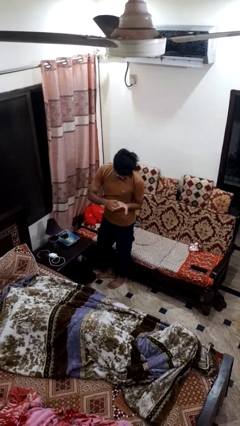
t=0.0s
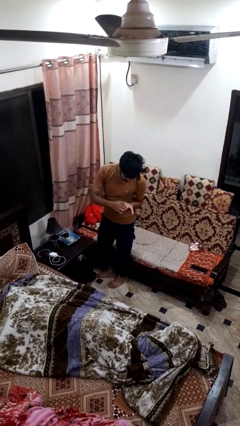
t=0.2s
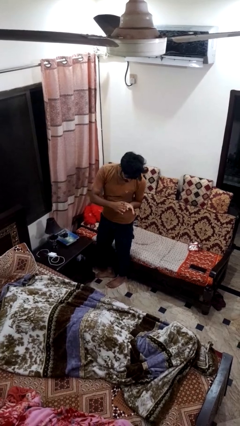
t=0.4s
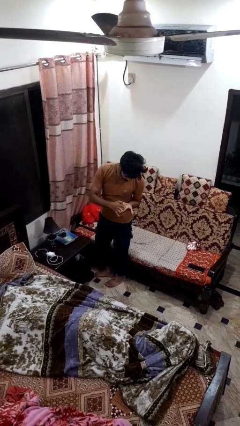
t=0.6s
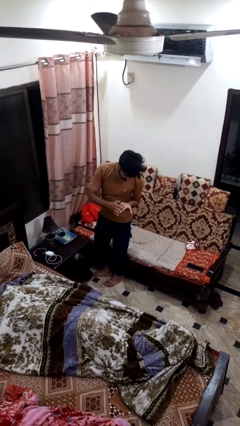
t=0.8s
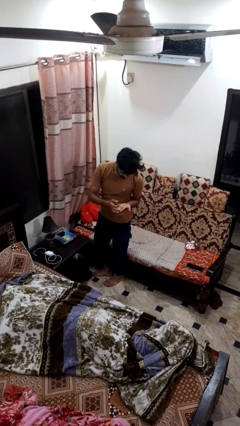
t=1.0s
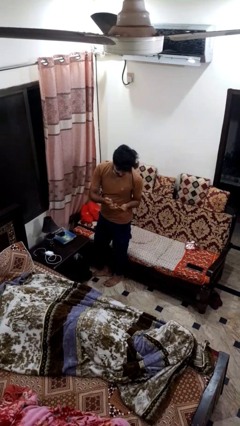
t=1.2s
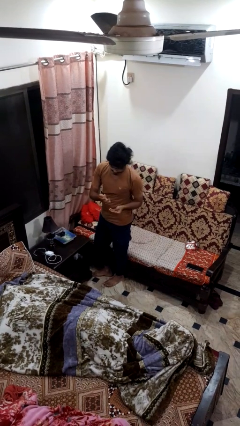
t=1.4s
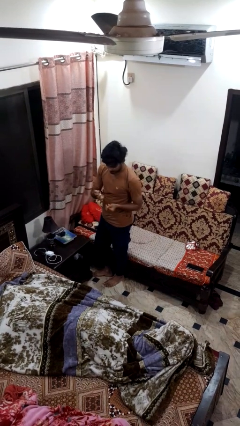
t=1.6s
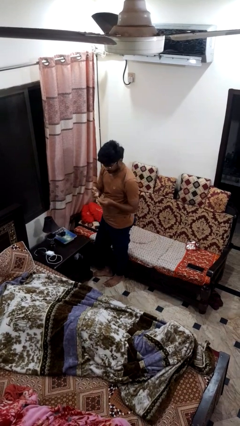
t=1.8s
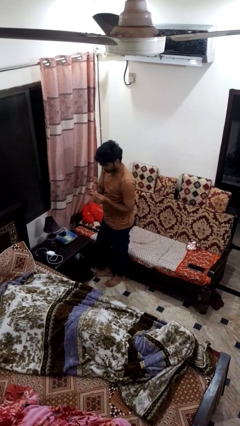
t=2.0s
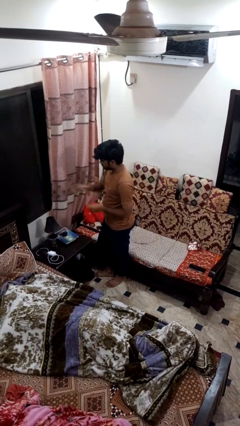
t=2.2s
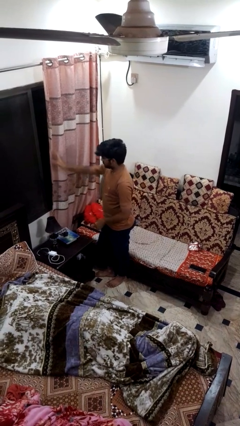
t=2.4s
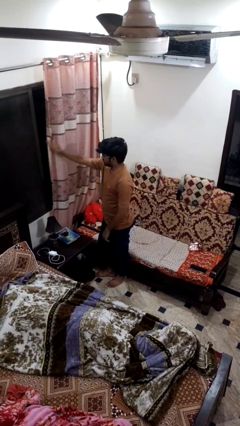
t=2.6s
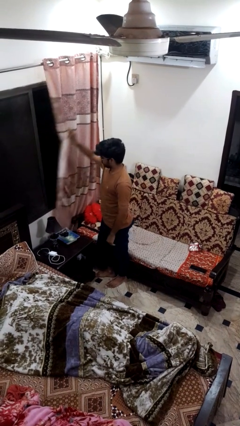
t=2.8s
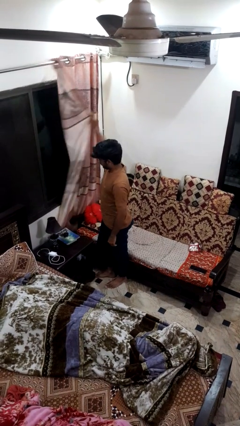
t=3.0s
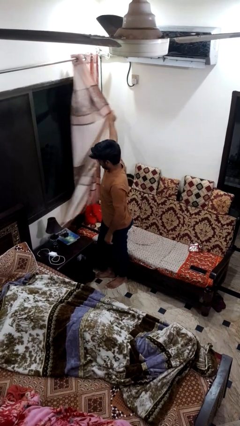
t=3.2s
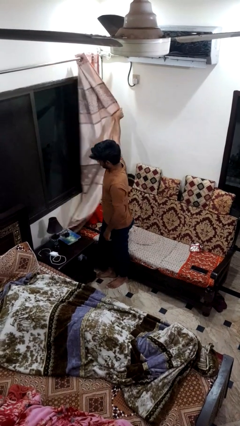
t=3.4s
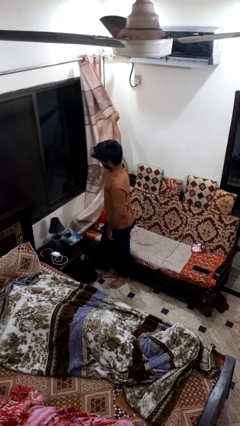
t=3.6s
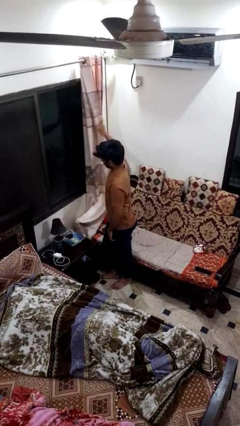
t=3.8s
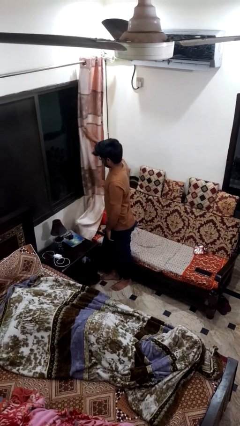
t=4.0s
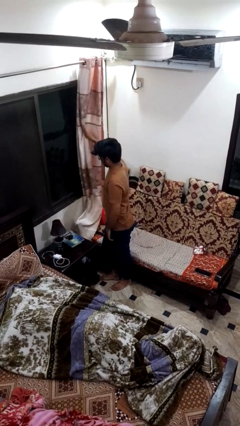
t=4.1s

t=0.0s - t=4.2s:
person opens curtains

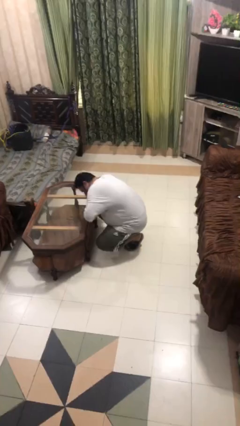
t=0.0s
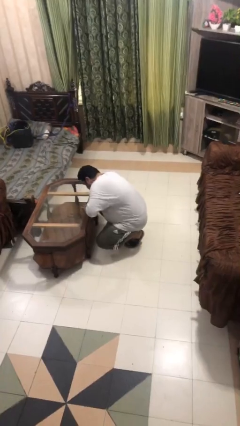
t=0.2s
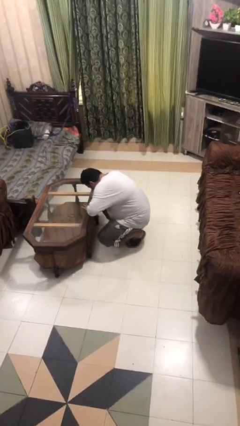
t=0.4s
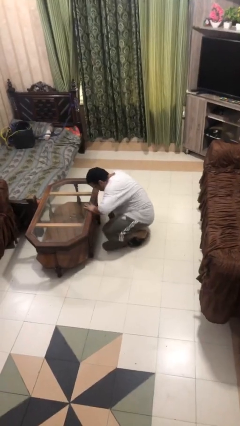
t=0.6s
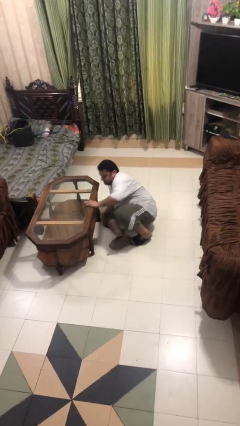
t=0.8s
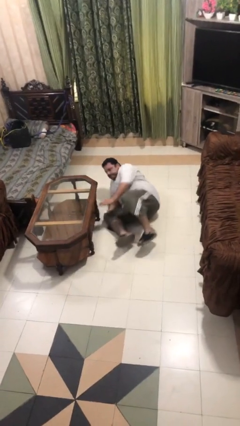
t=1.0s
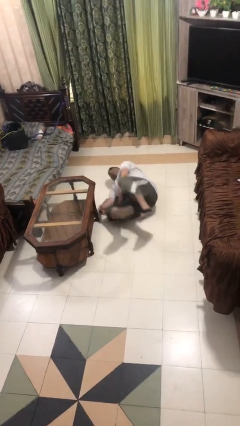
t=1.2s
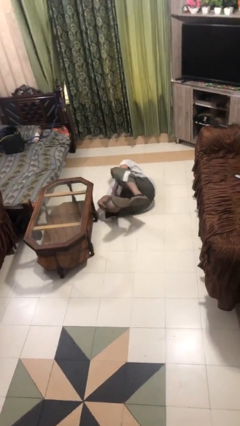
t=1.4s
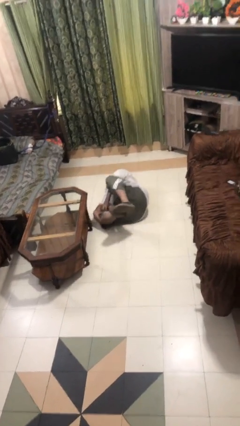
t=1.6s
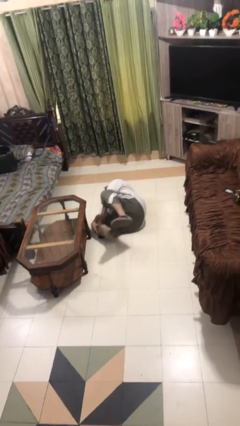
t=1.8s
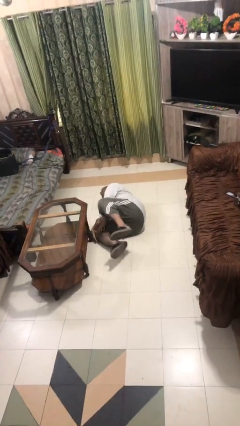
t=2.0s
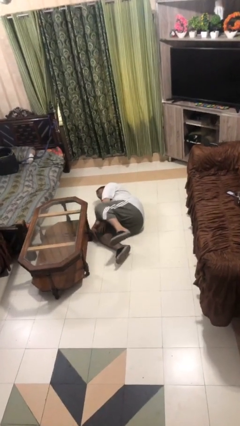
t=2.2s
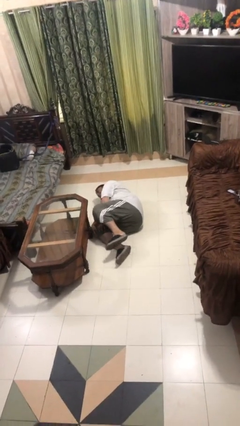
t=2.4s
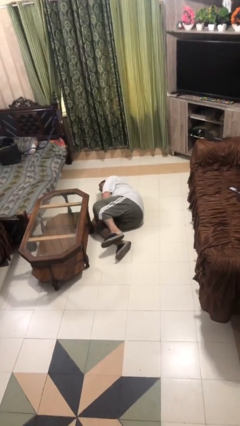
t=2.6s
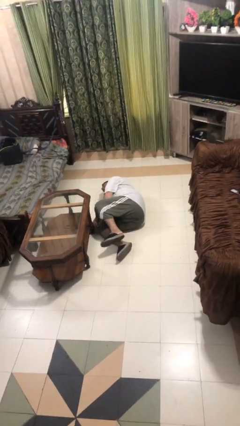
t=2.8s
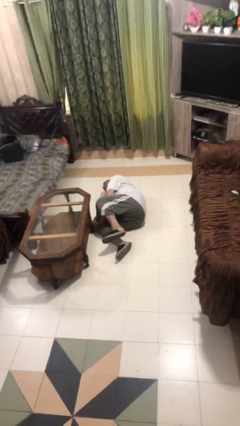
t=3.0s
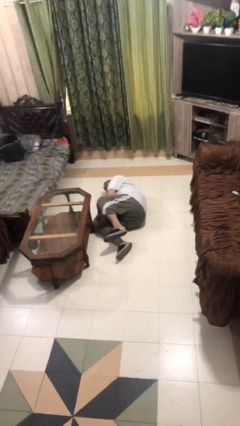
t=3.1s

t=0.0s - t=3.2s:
person lies down on floor

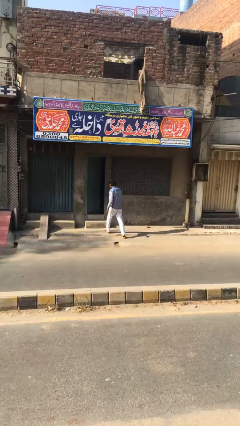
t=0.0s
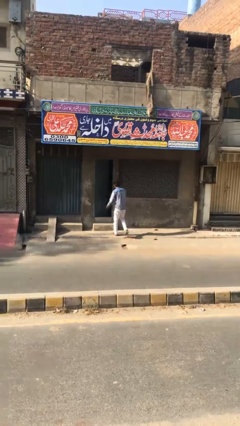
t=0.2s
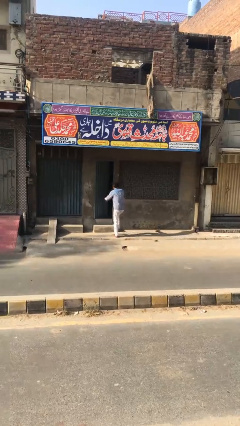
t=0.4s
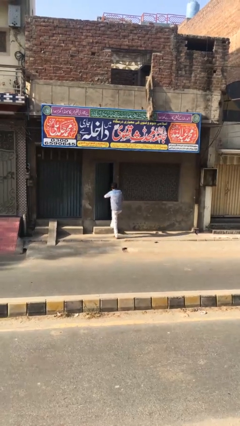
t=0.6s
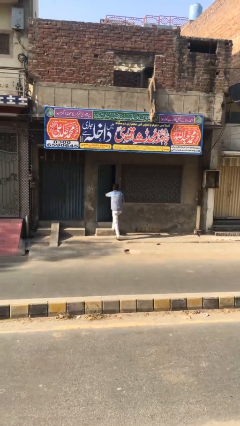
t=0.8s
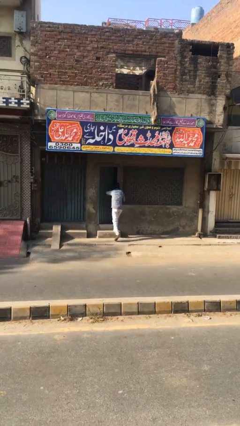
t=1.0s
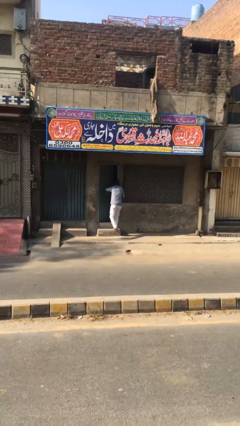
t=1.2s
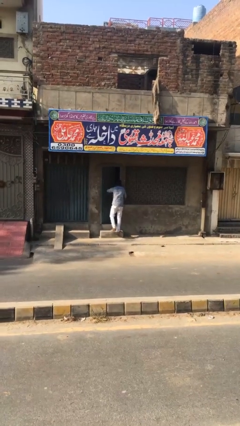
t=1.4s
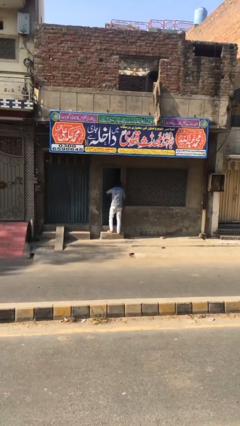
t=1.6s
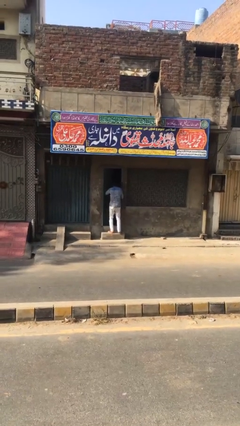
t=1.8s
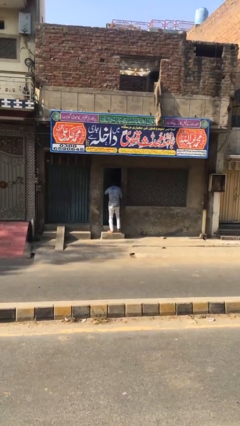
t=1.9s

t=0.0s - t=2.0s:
person opens facility door

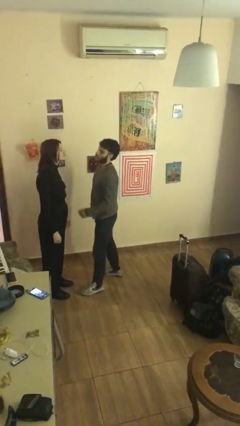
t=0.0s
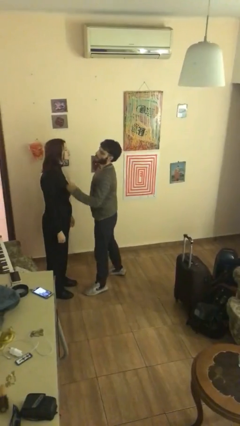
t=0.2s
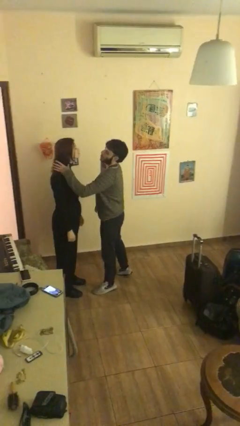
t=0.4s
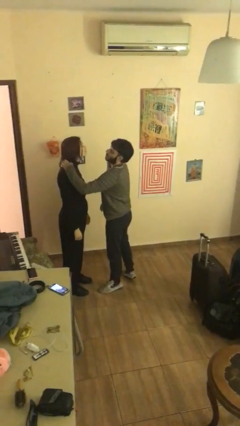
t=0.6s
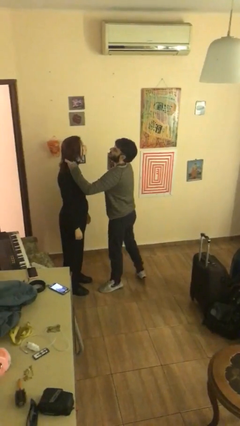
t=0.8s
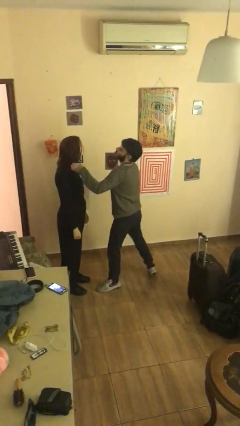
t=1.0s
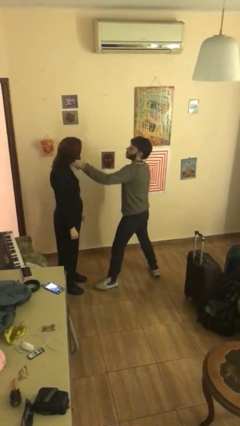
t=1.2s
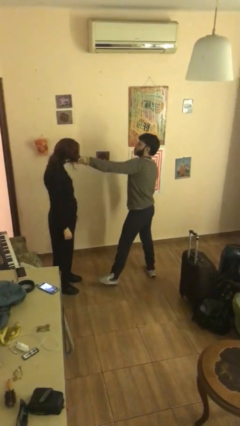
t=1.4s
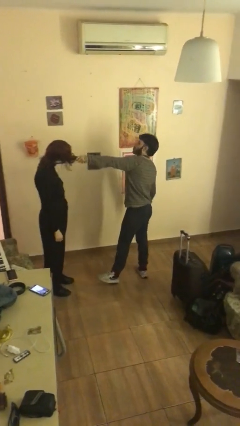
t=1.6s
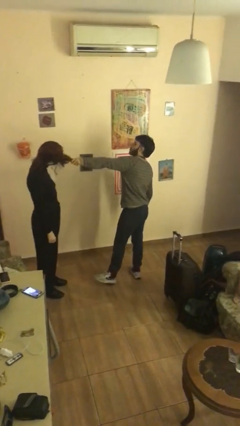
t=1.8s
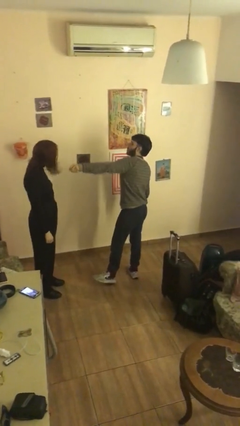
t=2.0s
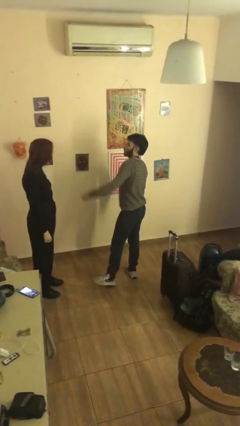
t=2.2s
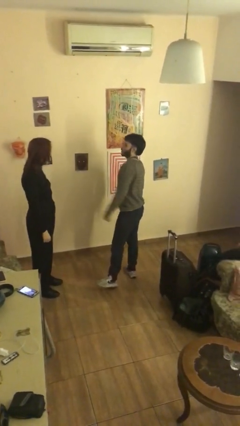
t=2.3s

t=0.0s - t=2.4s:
person grabs person by hair

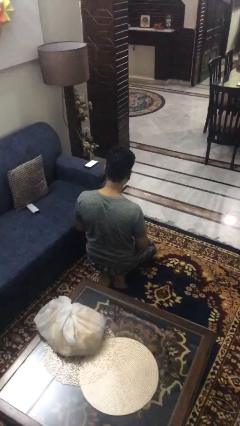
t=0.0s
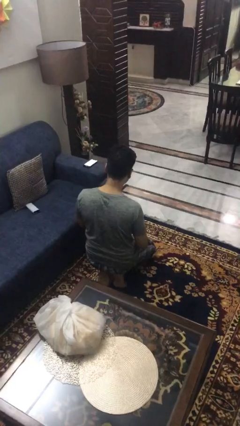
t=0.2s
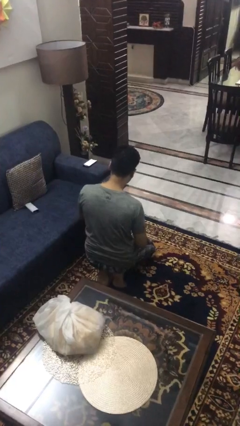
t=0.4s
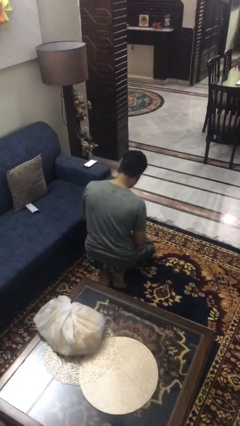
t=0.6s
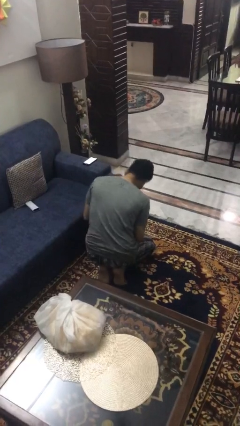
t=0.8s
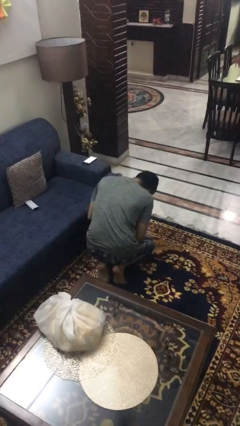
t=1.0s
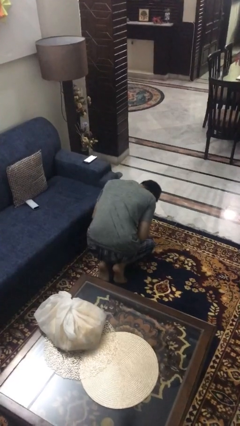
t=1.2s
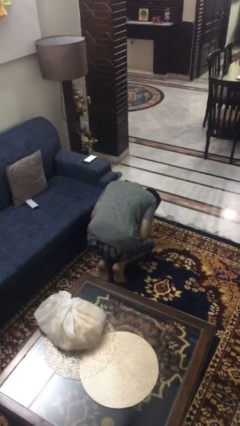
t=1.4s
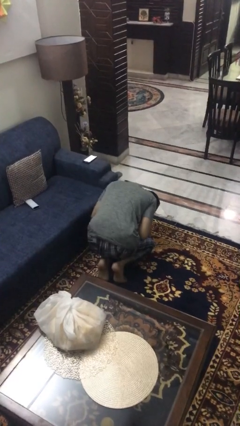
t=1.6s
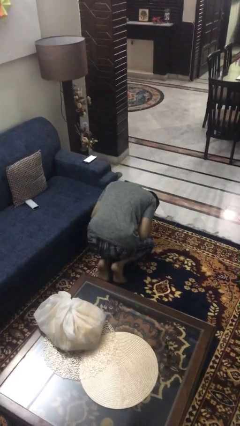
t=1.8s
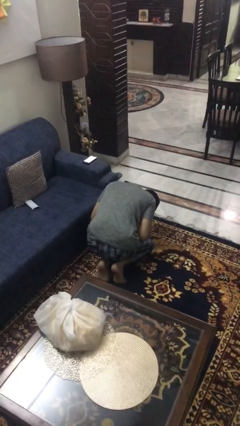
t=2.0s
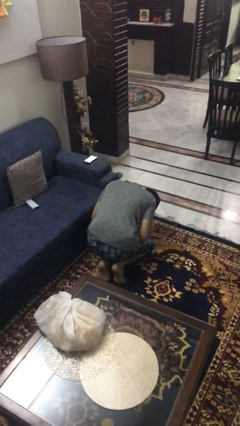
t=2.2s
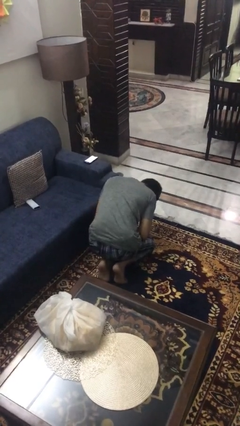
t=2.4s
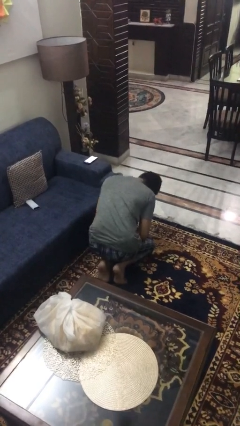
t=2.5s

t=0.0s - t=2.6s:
person searches under couch

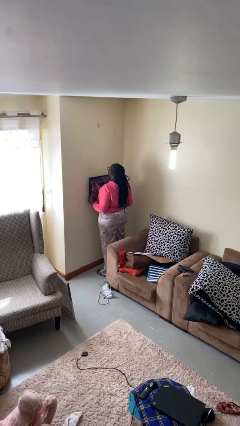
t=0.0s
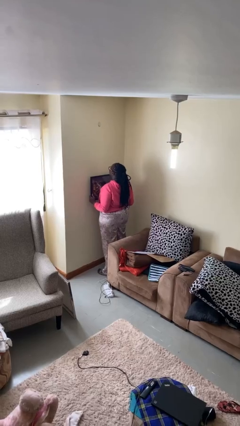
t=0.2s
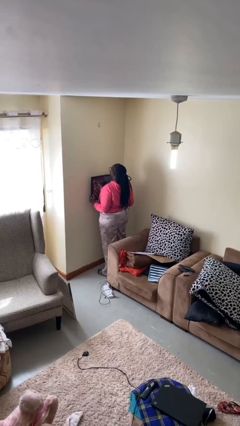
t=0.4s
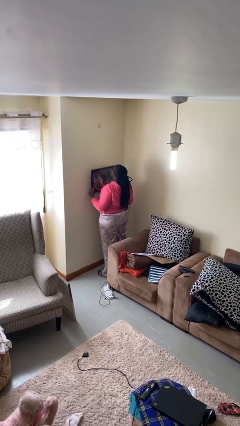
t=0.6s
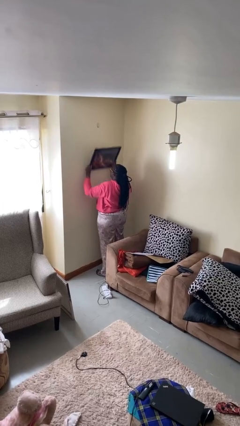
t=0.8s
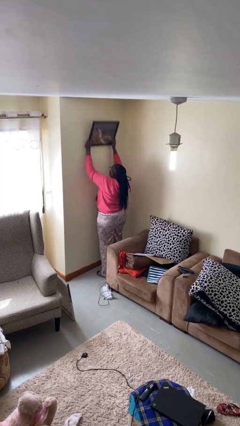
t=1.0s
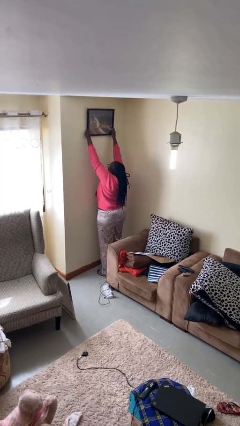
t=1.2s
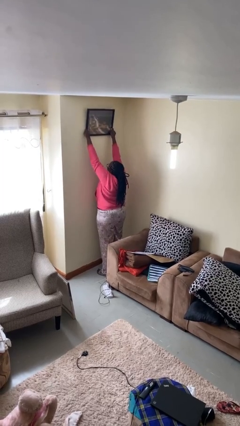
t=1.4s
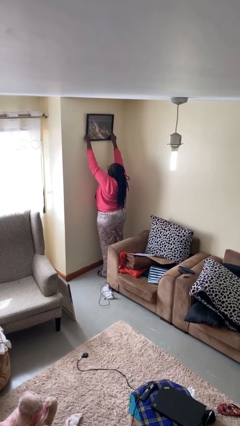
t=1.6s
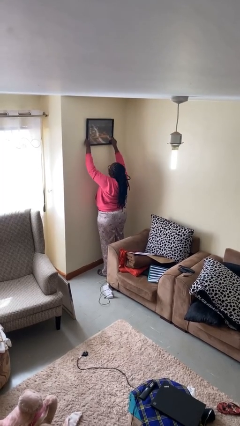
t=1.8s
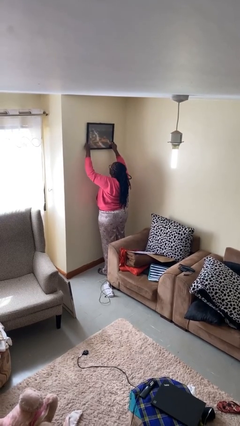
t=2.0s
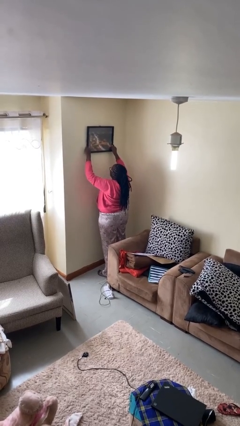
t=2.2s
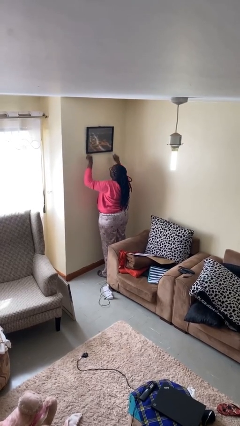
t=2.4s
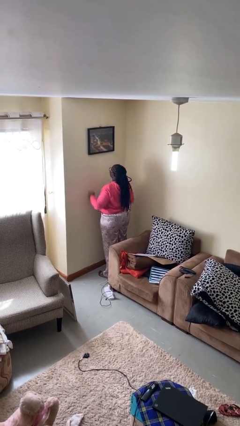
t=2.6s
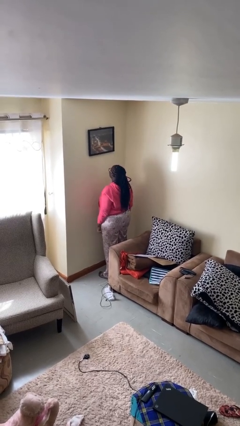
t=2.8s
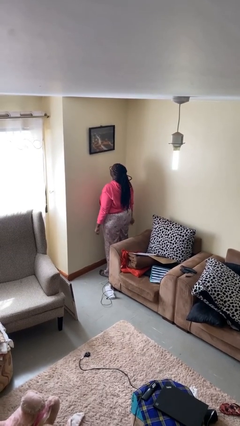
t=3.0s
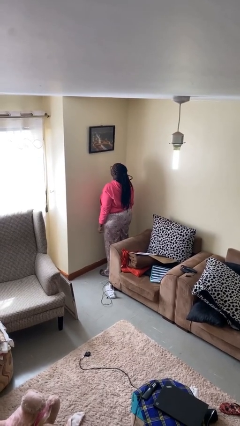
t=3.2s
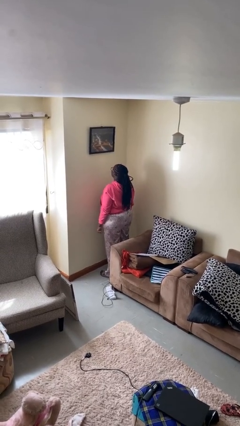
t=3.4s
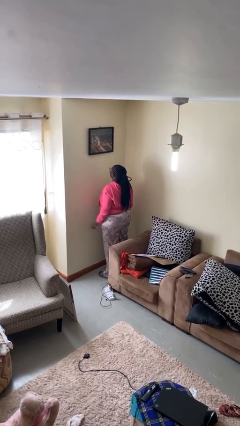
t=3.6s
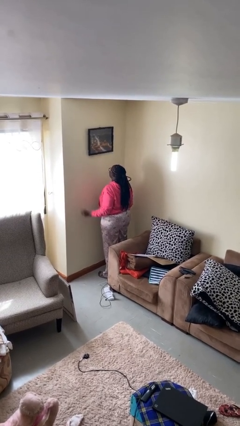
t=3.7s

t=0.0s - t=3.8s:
person puts up picture frame
